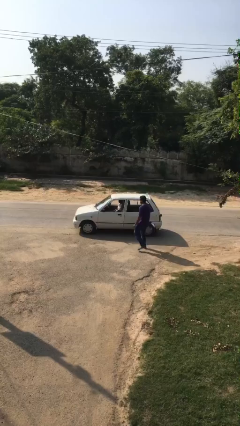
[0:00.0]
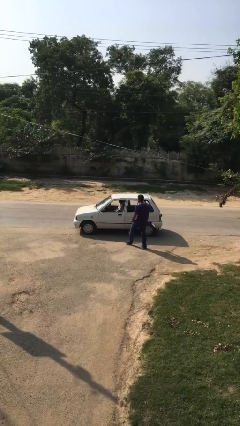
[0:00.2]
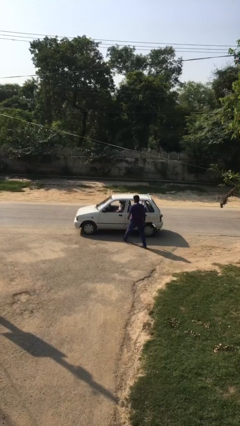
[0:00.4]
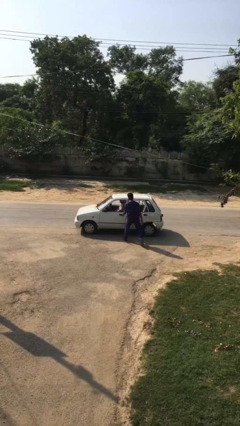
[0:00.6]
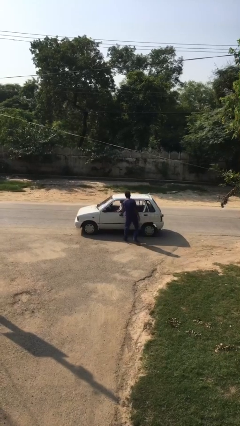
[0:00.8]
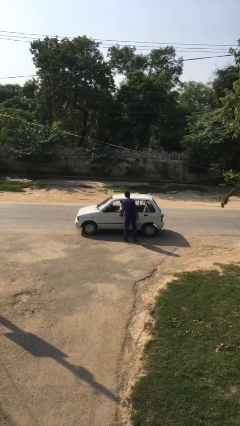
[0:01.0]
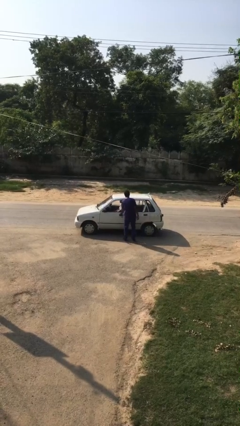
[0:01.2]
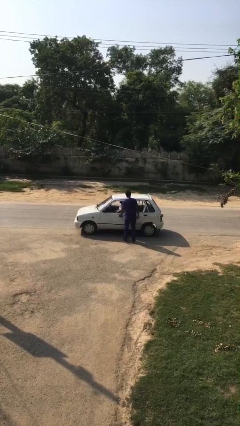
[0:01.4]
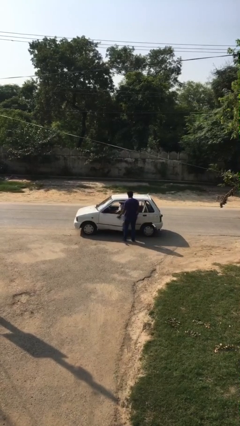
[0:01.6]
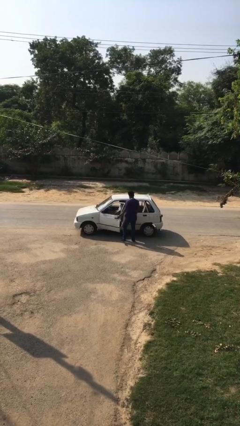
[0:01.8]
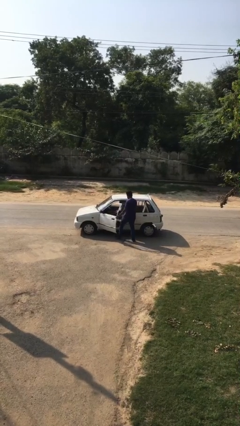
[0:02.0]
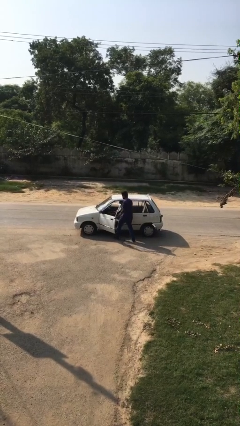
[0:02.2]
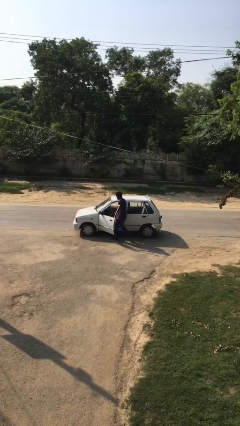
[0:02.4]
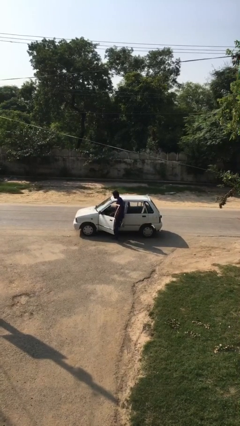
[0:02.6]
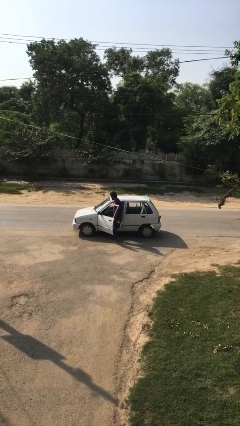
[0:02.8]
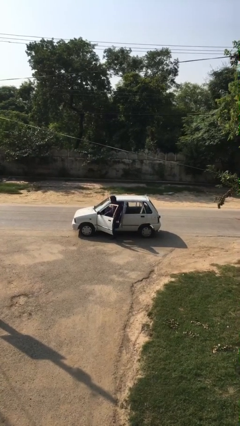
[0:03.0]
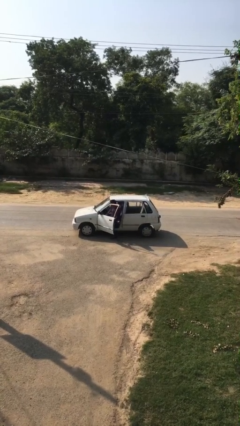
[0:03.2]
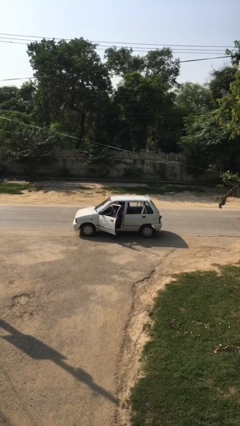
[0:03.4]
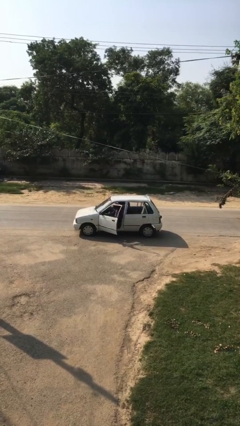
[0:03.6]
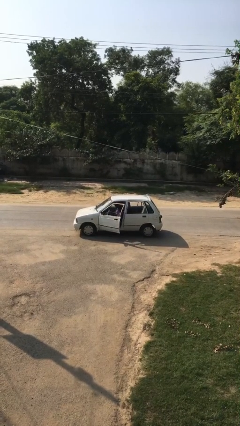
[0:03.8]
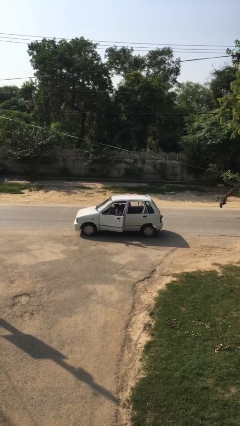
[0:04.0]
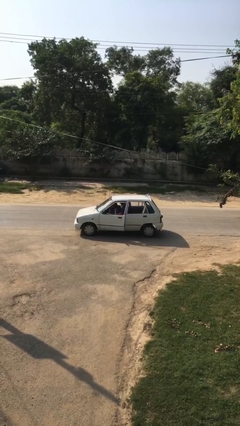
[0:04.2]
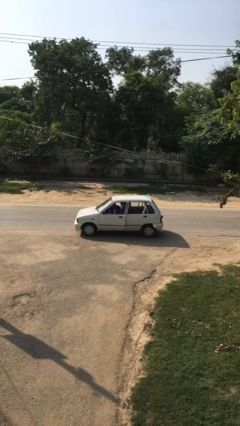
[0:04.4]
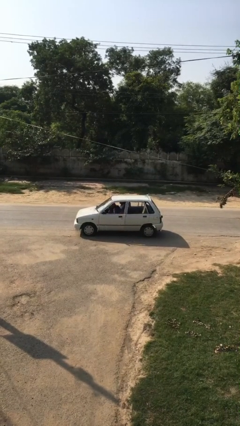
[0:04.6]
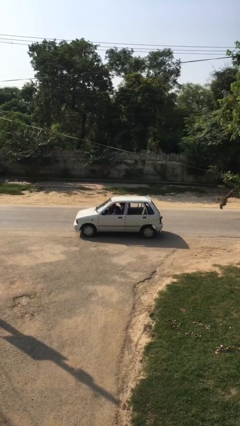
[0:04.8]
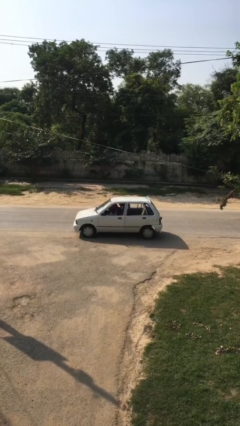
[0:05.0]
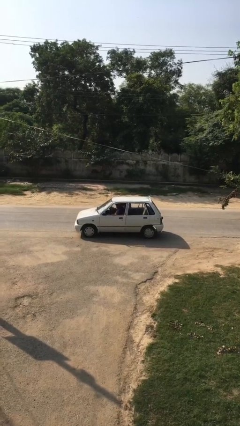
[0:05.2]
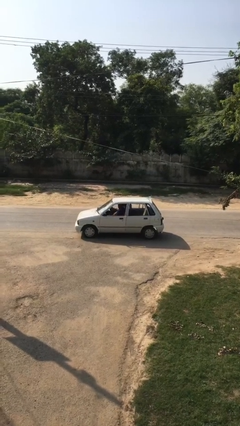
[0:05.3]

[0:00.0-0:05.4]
car picks up person

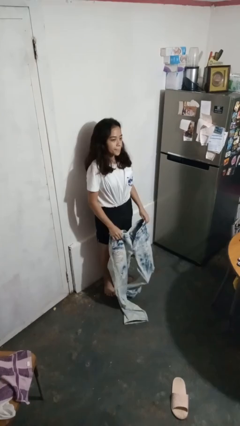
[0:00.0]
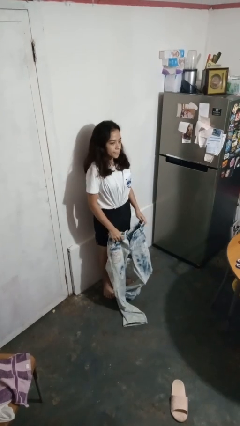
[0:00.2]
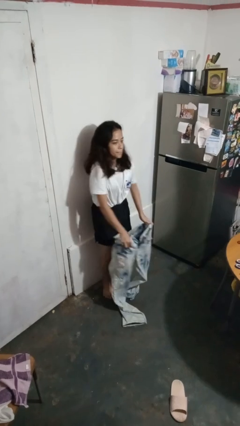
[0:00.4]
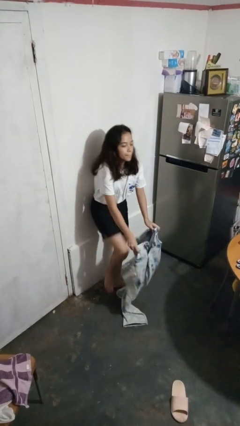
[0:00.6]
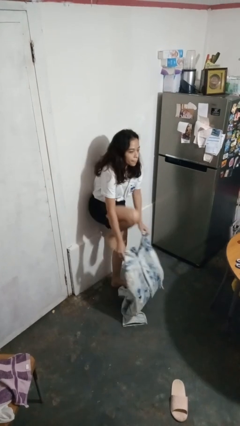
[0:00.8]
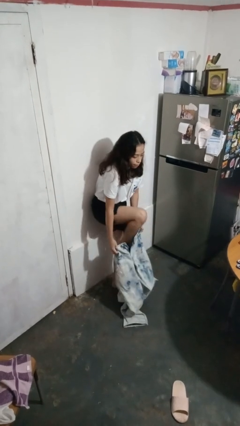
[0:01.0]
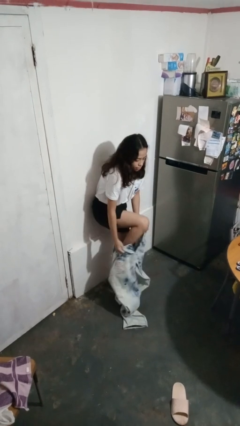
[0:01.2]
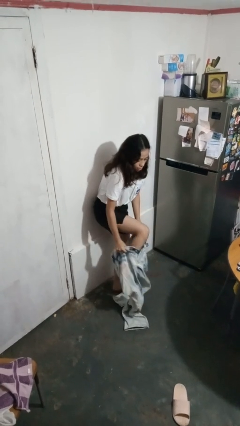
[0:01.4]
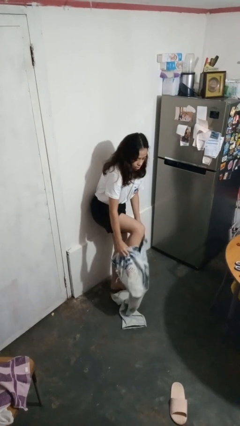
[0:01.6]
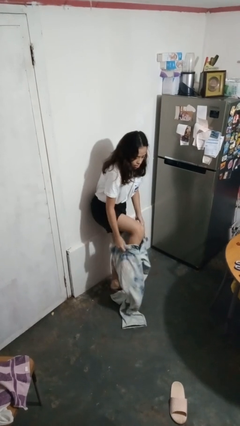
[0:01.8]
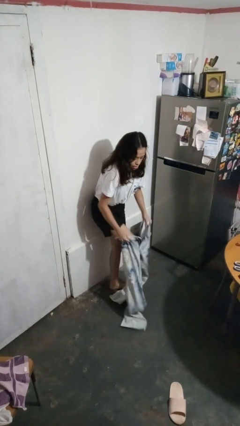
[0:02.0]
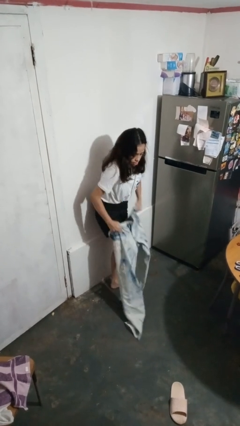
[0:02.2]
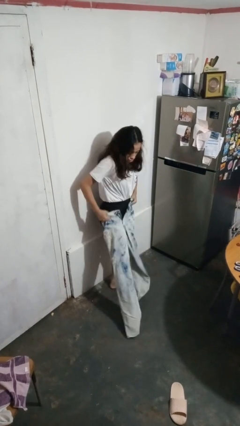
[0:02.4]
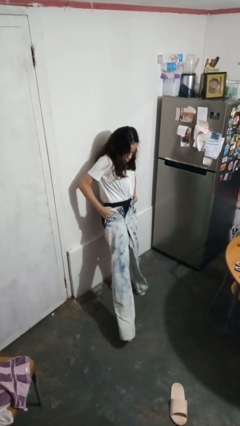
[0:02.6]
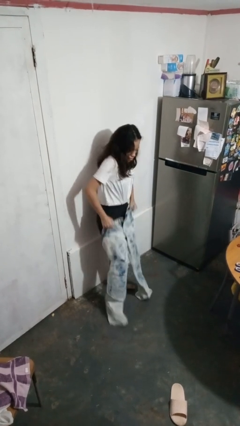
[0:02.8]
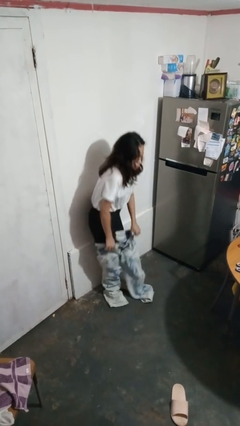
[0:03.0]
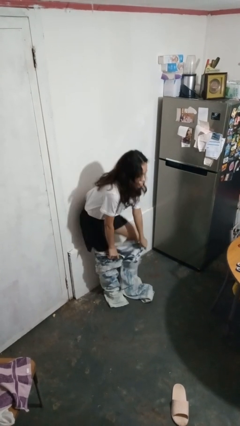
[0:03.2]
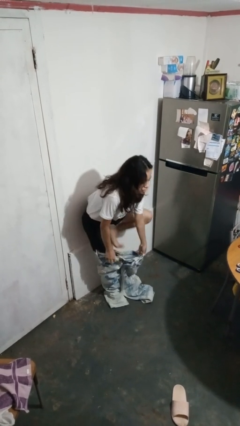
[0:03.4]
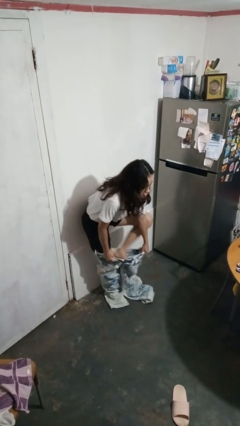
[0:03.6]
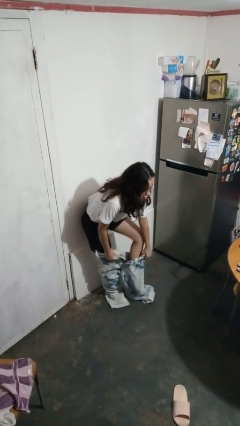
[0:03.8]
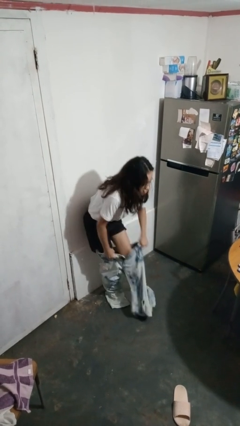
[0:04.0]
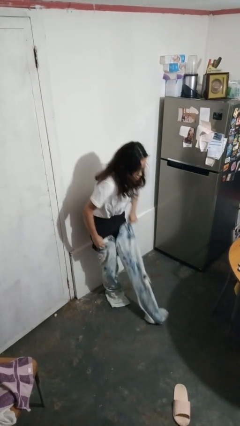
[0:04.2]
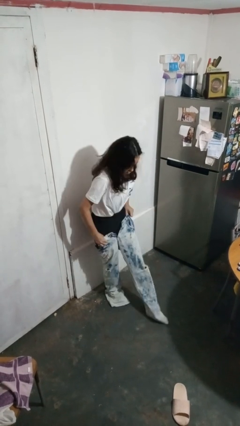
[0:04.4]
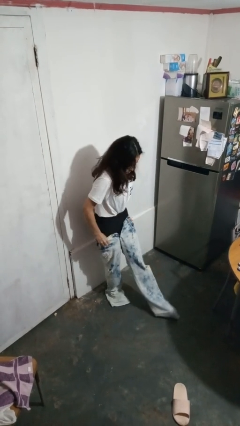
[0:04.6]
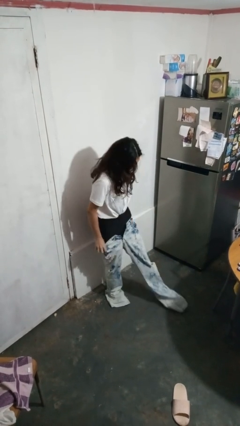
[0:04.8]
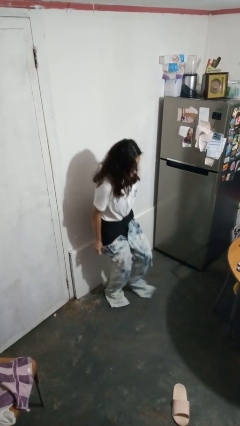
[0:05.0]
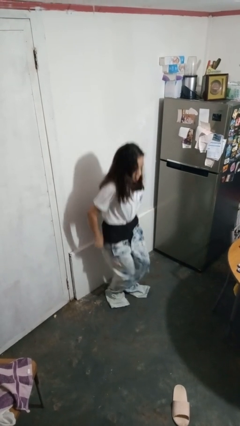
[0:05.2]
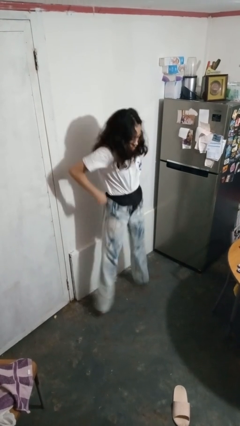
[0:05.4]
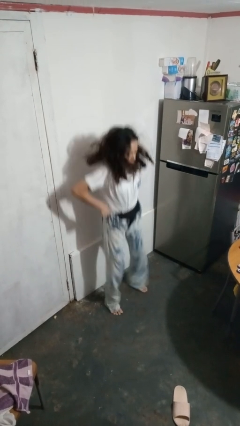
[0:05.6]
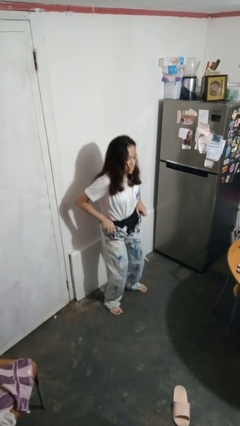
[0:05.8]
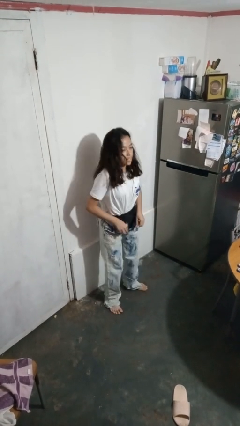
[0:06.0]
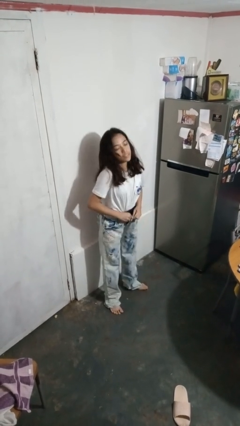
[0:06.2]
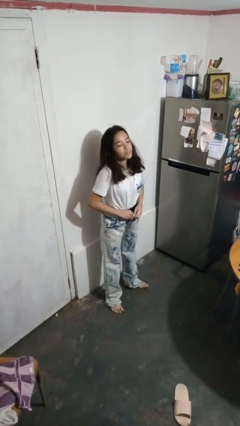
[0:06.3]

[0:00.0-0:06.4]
person puts on pants

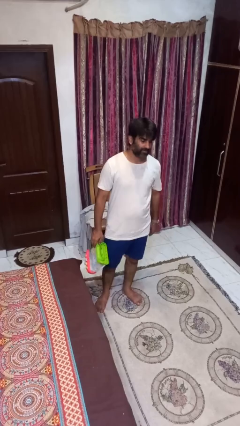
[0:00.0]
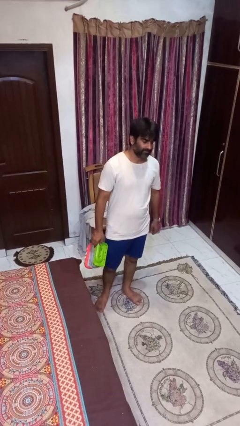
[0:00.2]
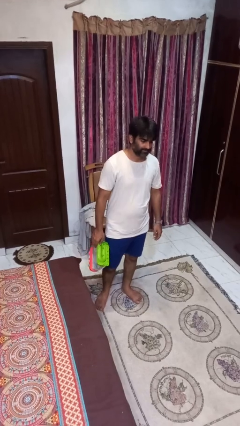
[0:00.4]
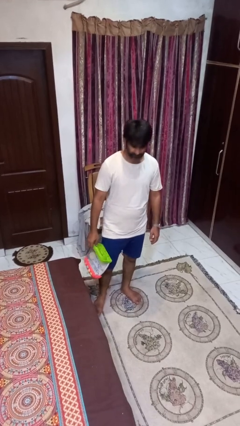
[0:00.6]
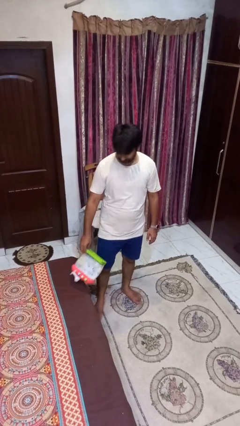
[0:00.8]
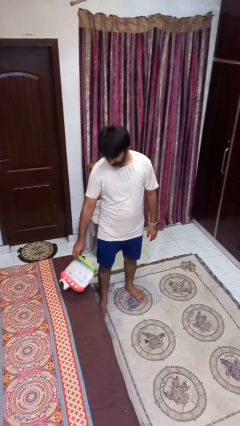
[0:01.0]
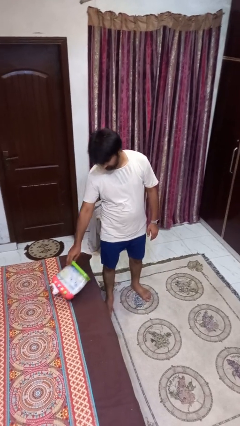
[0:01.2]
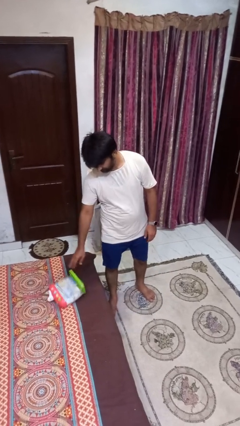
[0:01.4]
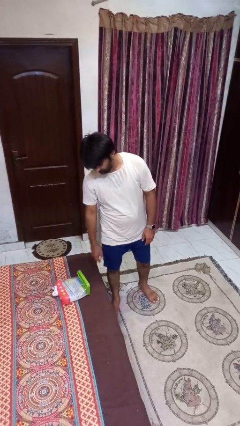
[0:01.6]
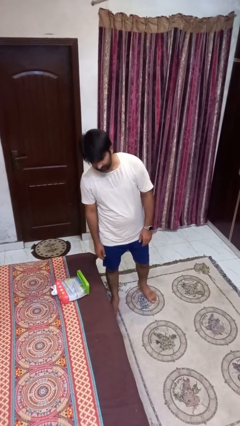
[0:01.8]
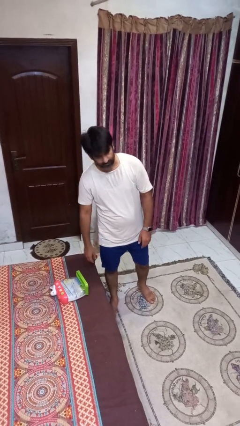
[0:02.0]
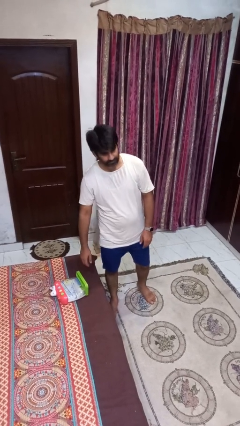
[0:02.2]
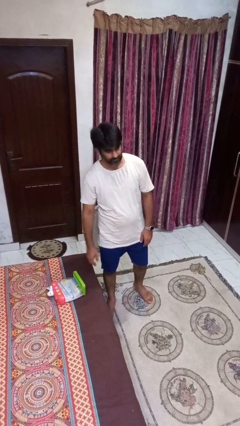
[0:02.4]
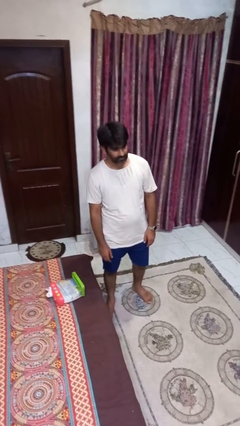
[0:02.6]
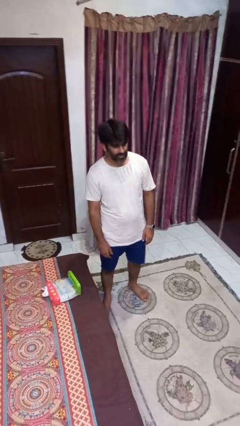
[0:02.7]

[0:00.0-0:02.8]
person puts down object on bed

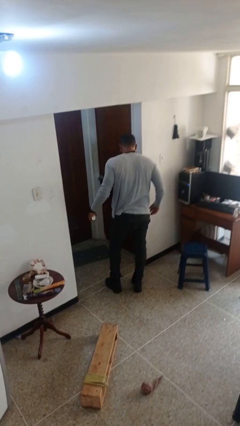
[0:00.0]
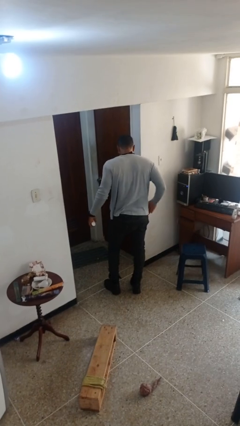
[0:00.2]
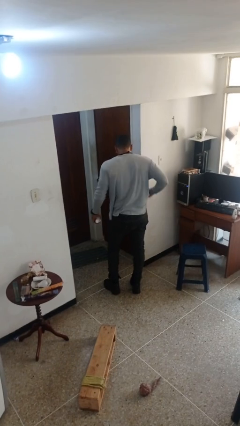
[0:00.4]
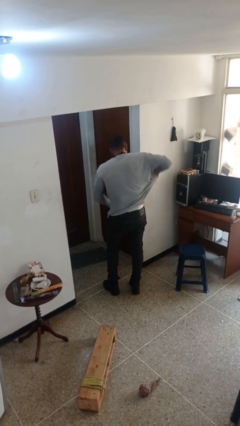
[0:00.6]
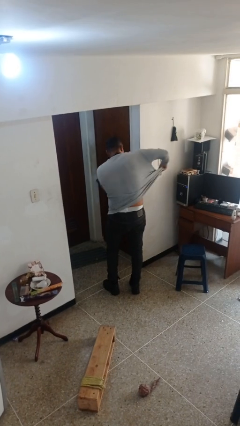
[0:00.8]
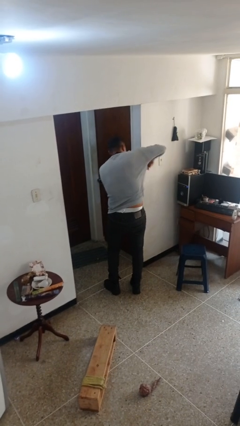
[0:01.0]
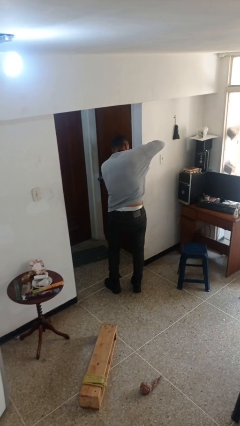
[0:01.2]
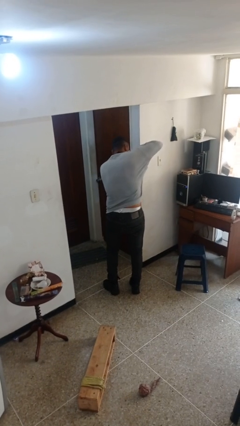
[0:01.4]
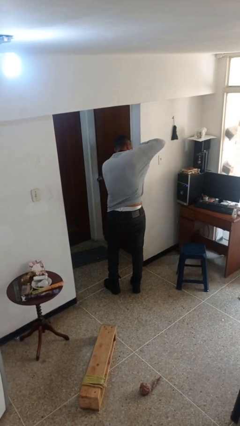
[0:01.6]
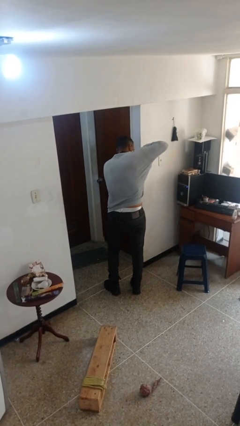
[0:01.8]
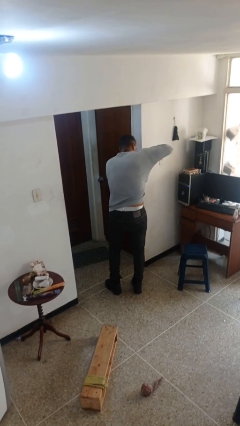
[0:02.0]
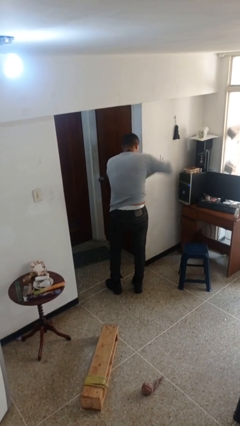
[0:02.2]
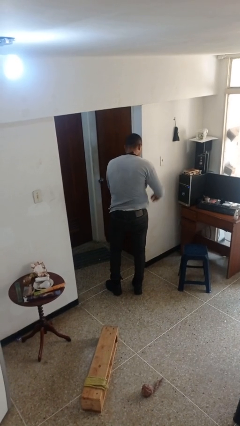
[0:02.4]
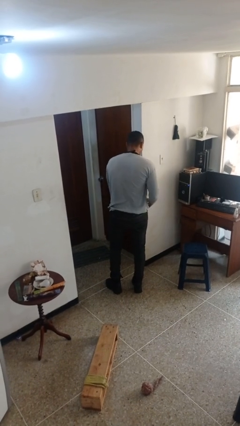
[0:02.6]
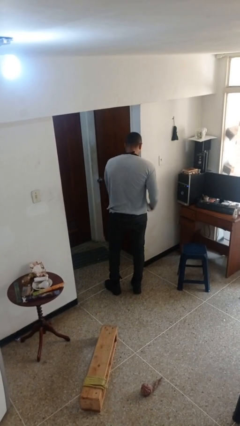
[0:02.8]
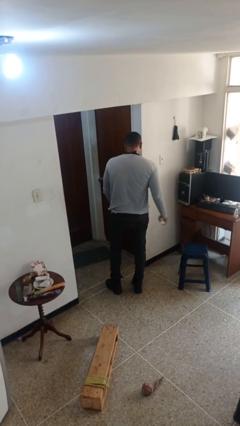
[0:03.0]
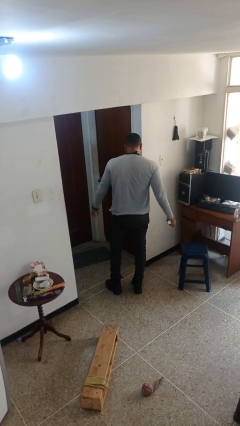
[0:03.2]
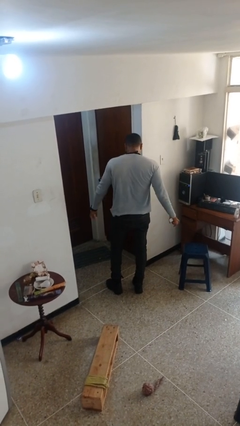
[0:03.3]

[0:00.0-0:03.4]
person applies deodorant

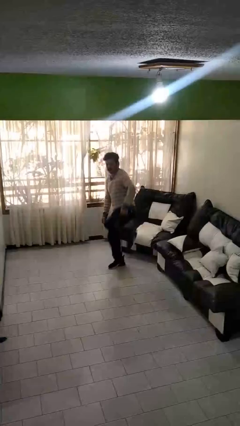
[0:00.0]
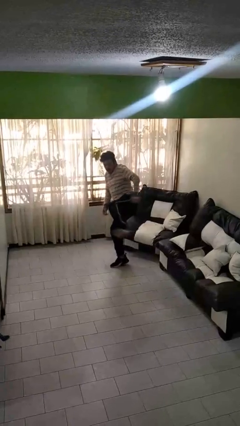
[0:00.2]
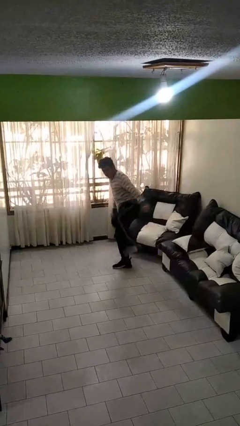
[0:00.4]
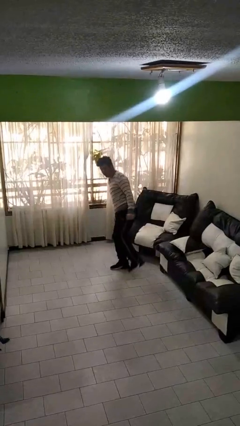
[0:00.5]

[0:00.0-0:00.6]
person karate kicks
